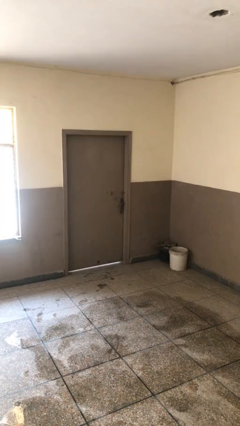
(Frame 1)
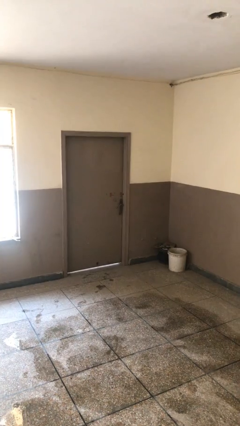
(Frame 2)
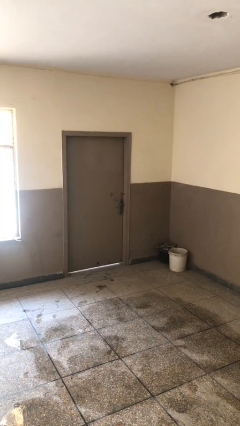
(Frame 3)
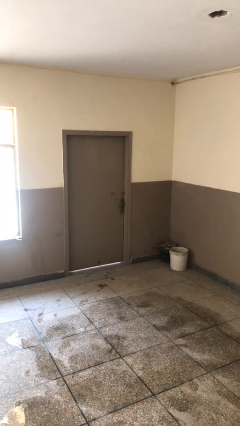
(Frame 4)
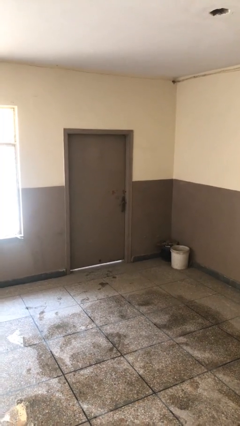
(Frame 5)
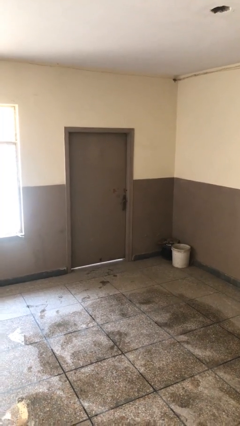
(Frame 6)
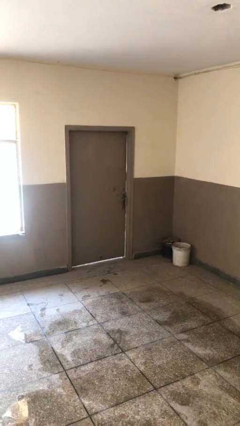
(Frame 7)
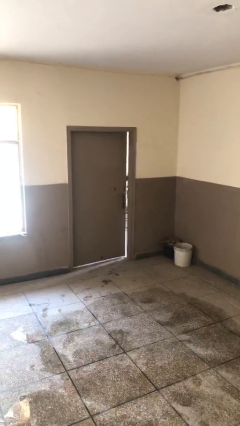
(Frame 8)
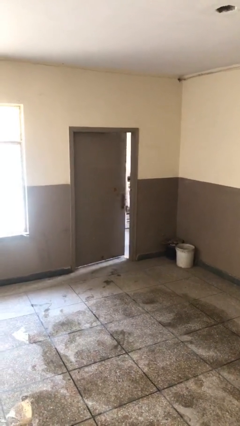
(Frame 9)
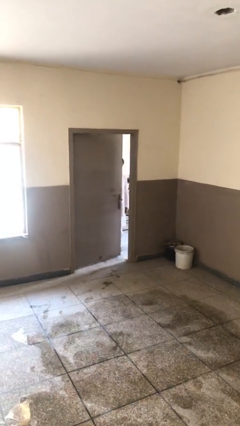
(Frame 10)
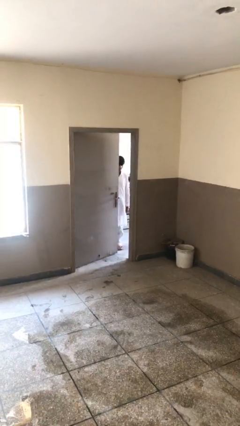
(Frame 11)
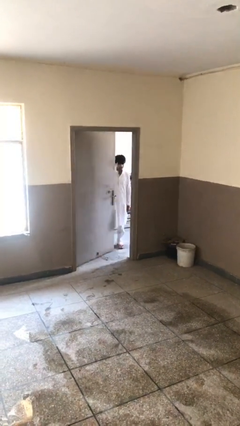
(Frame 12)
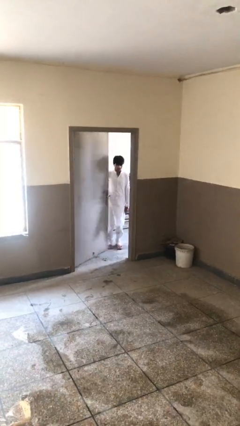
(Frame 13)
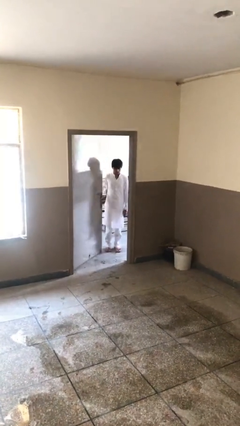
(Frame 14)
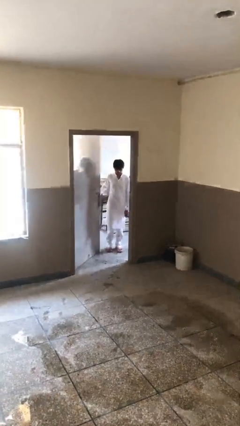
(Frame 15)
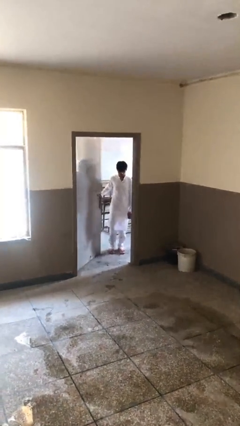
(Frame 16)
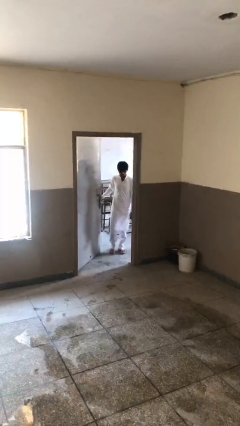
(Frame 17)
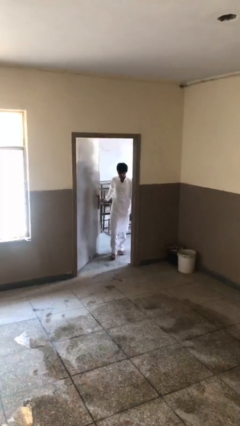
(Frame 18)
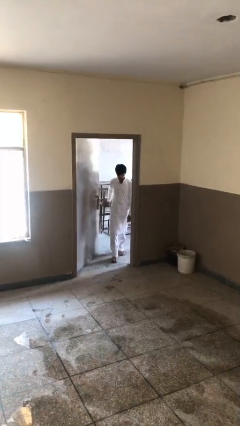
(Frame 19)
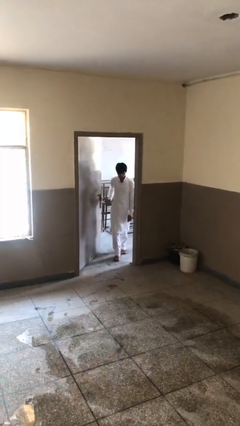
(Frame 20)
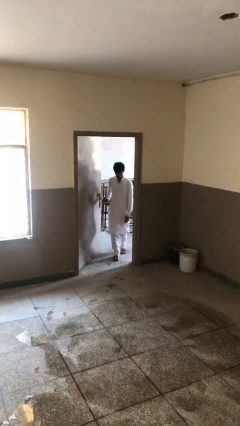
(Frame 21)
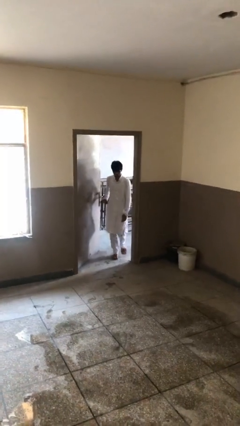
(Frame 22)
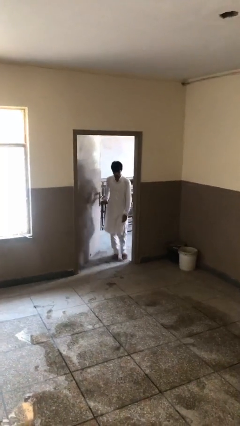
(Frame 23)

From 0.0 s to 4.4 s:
person opens facility door

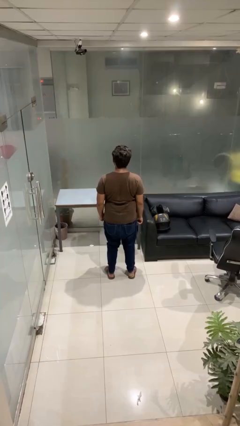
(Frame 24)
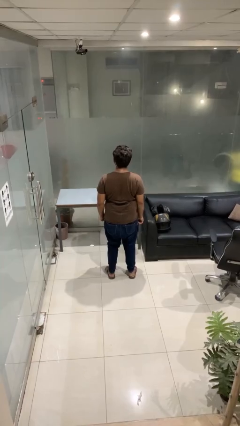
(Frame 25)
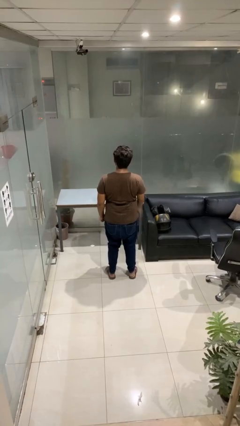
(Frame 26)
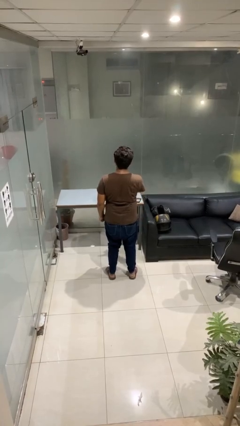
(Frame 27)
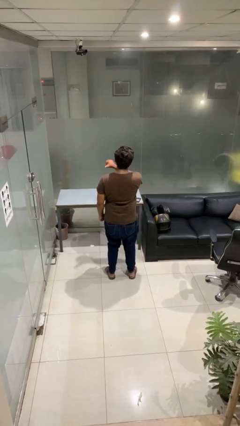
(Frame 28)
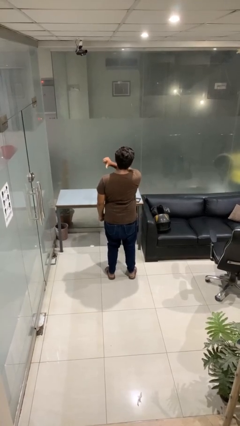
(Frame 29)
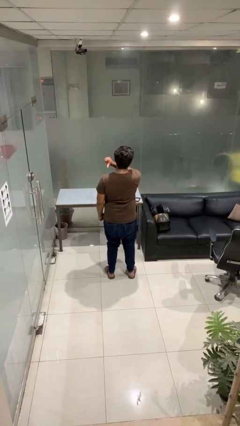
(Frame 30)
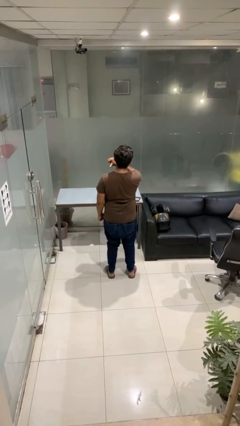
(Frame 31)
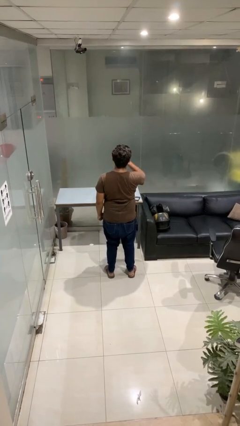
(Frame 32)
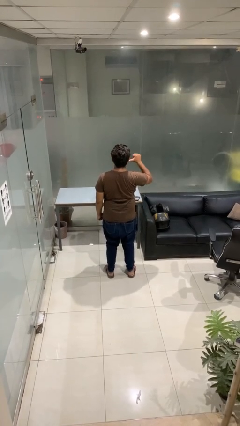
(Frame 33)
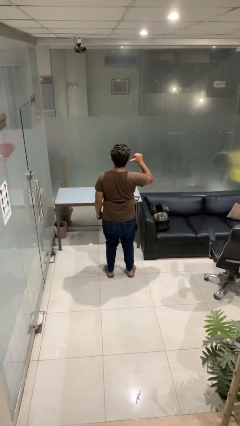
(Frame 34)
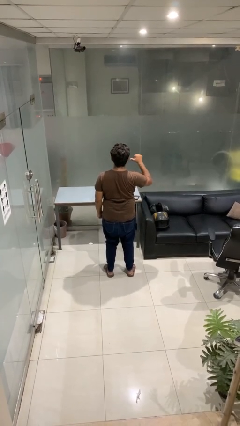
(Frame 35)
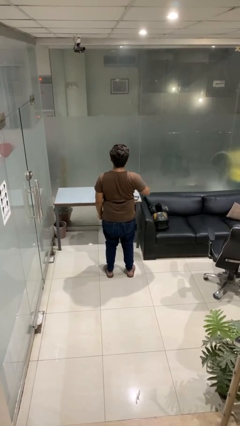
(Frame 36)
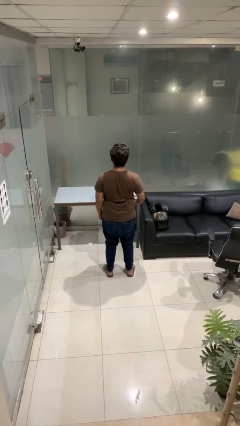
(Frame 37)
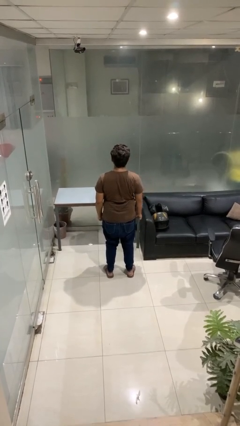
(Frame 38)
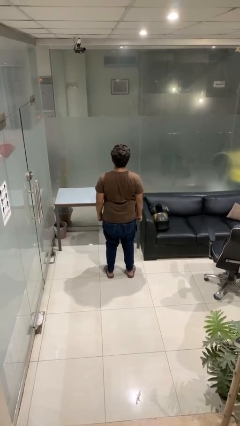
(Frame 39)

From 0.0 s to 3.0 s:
person gestures cut

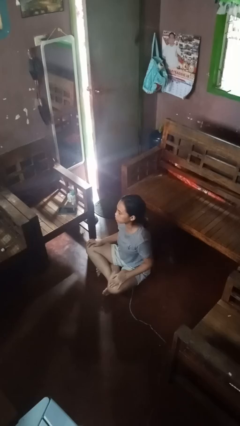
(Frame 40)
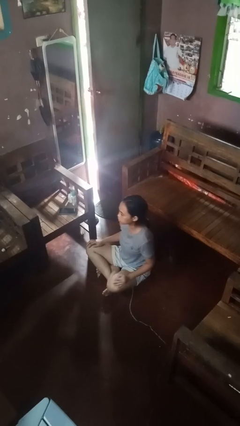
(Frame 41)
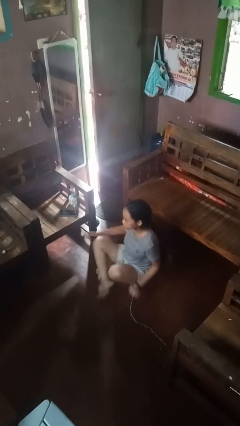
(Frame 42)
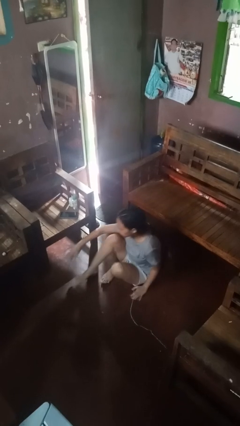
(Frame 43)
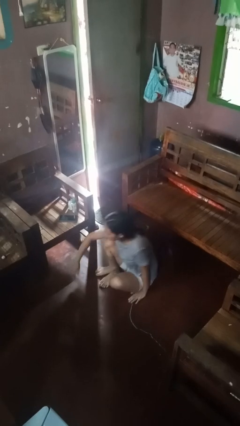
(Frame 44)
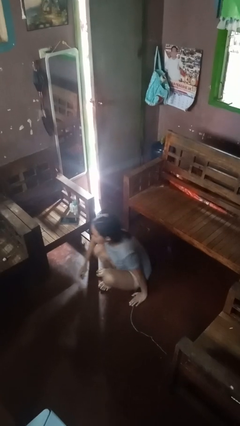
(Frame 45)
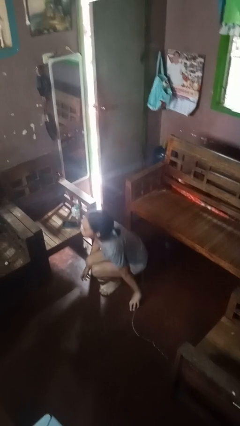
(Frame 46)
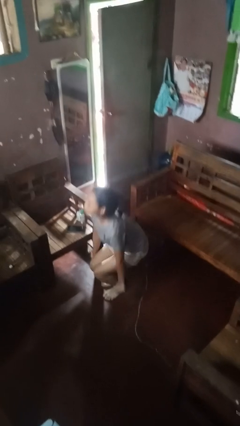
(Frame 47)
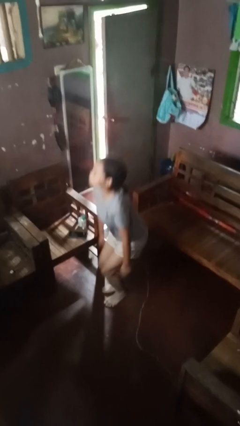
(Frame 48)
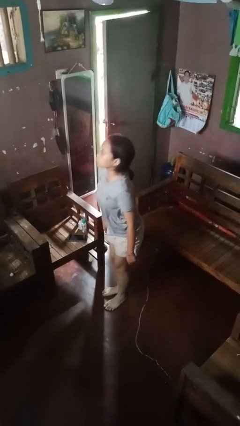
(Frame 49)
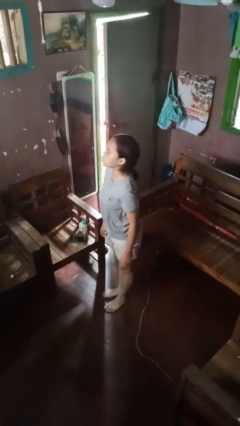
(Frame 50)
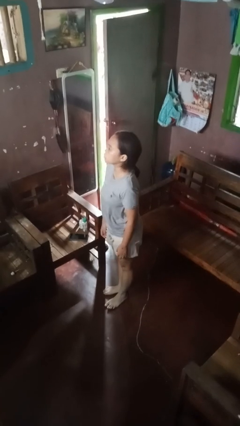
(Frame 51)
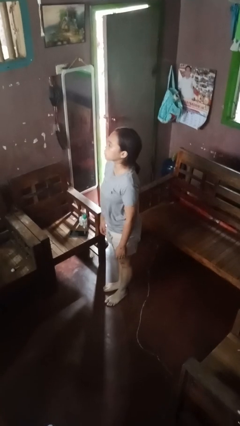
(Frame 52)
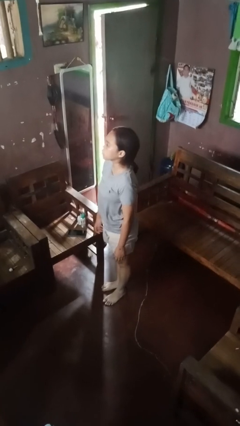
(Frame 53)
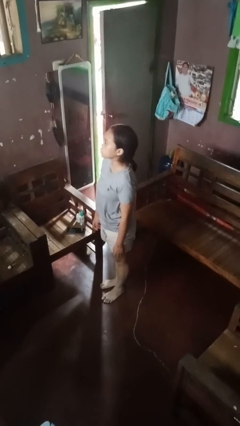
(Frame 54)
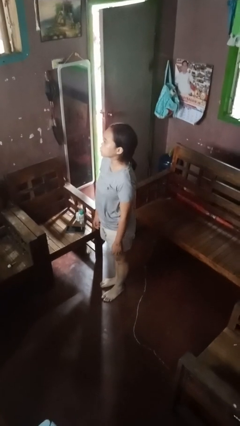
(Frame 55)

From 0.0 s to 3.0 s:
person stands up from floor

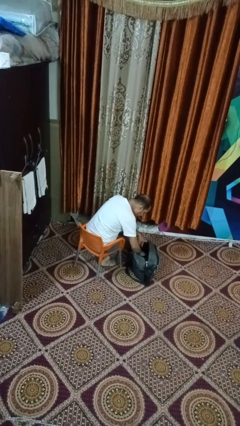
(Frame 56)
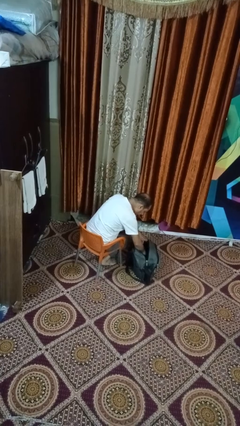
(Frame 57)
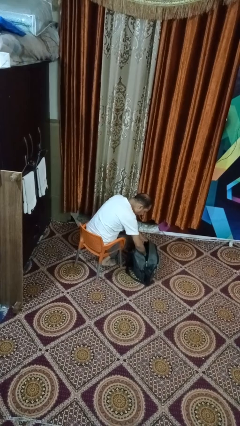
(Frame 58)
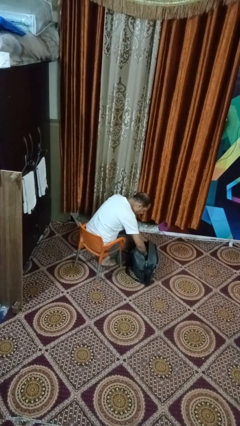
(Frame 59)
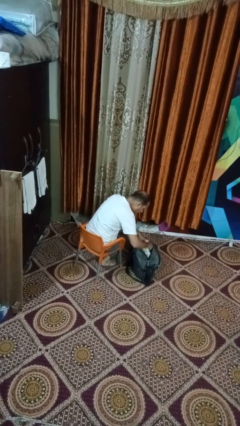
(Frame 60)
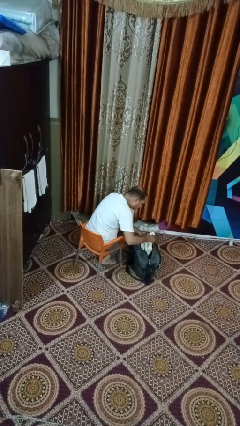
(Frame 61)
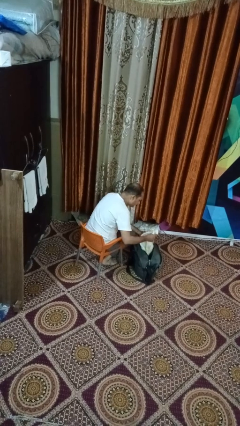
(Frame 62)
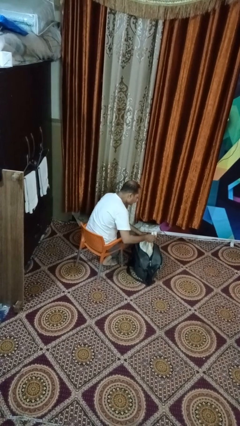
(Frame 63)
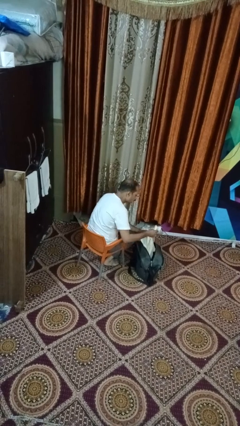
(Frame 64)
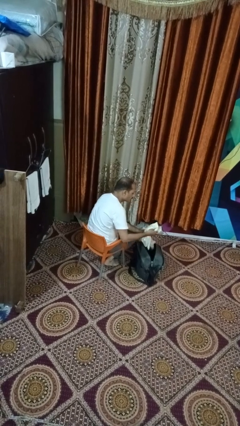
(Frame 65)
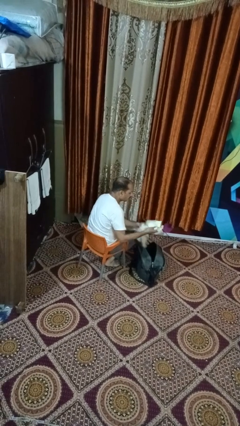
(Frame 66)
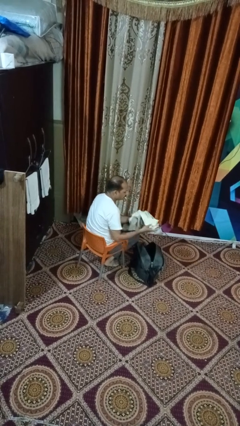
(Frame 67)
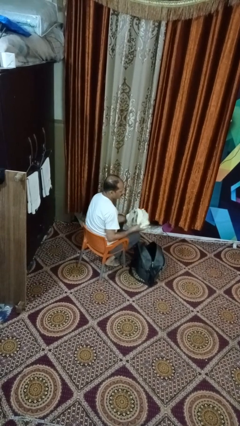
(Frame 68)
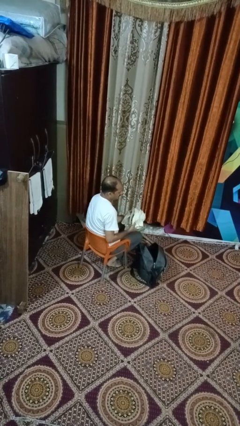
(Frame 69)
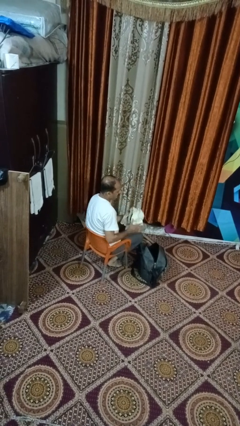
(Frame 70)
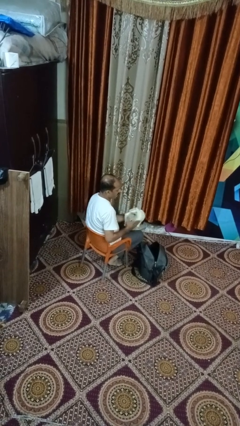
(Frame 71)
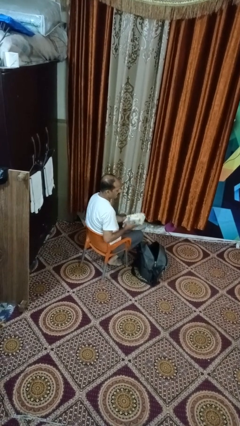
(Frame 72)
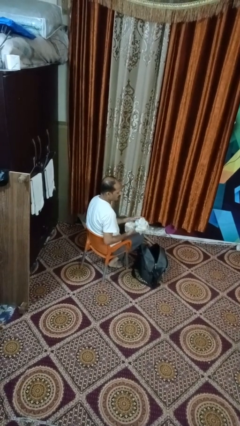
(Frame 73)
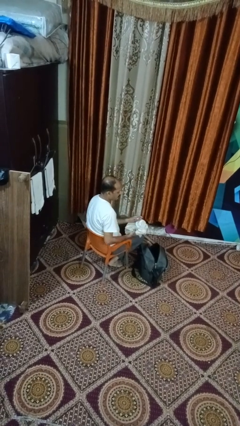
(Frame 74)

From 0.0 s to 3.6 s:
person takes object from backpack

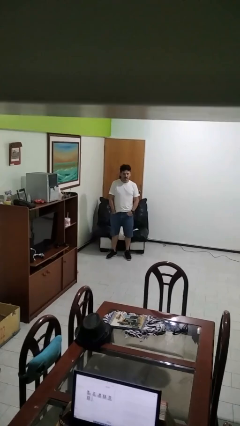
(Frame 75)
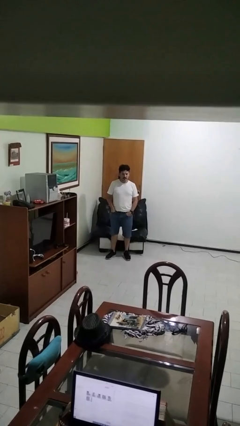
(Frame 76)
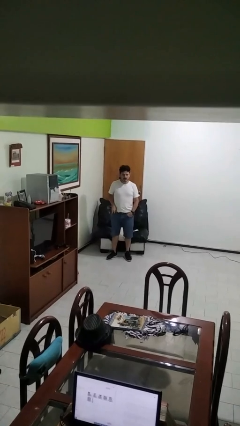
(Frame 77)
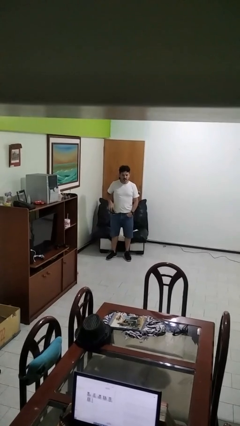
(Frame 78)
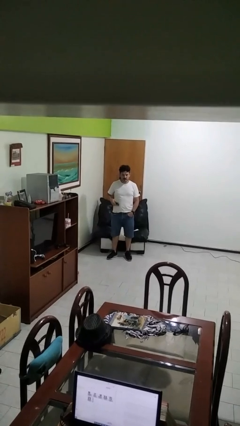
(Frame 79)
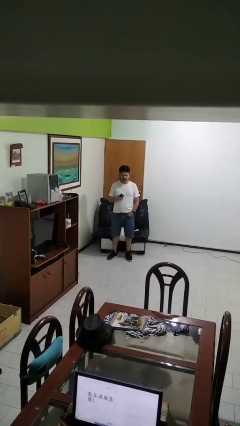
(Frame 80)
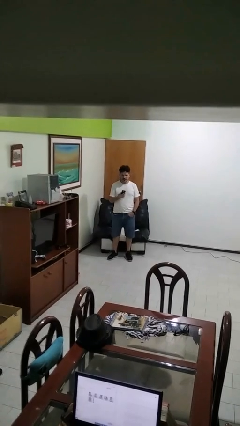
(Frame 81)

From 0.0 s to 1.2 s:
person takes phone from pocket

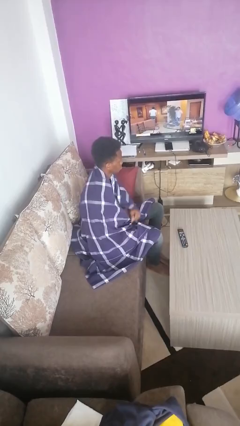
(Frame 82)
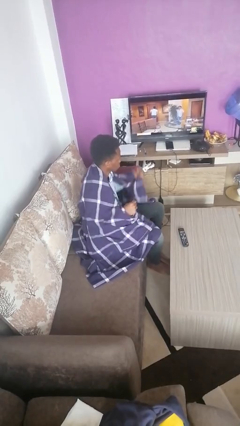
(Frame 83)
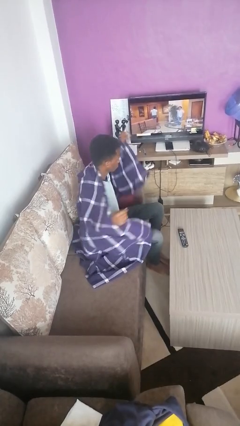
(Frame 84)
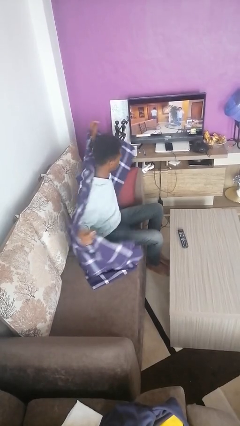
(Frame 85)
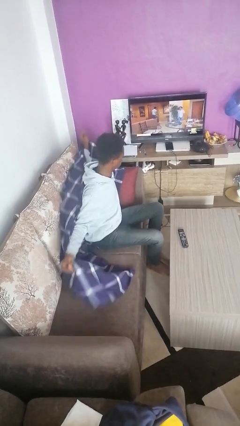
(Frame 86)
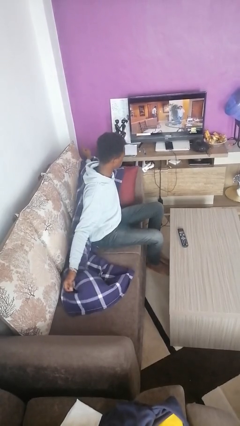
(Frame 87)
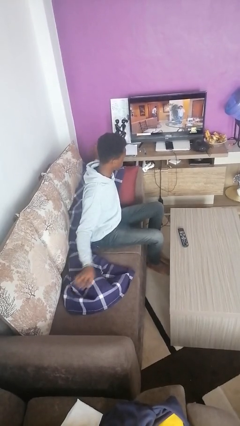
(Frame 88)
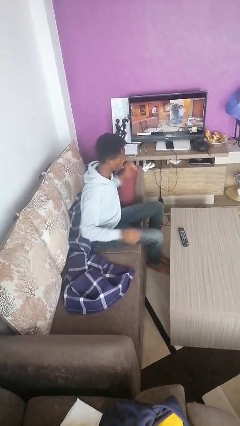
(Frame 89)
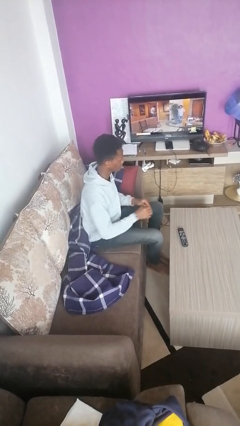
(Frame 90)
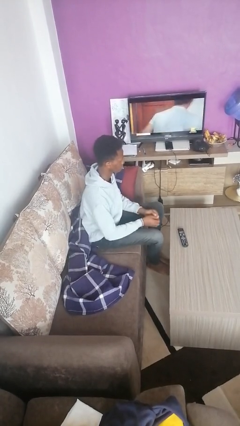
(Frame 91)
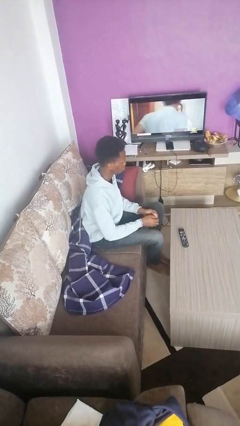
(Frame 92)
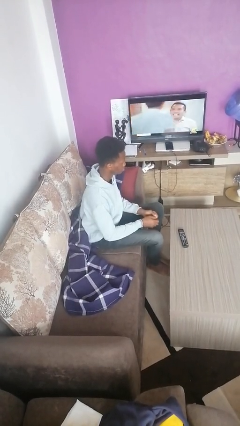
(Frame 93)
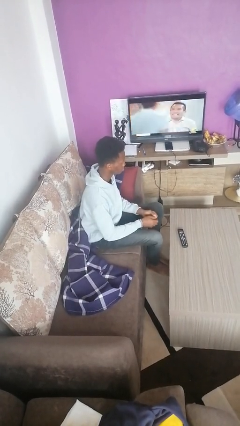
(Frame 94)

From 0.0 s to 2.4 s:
person uncovers with blanket
